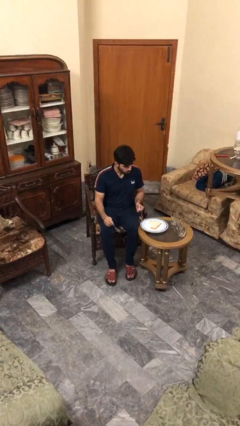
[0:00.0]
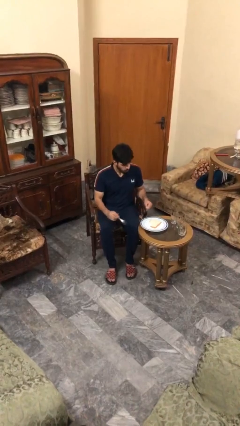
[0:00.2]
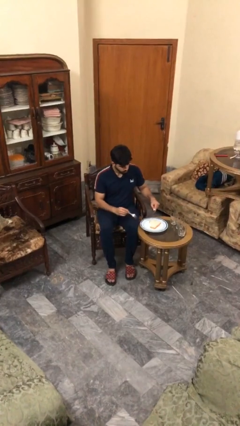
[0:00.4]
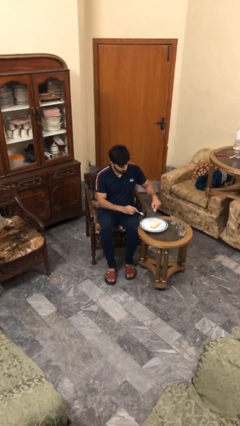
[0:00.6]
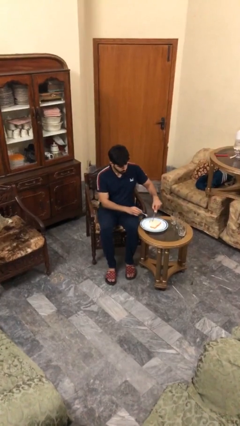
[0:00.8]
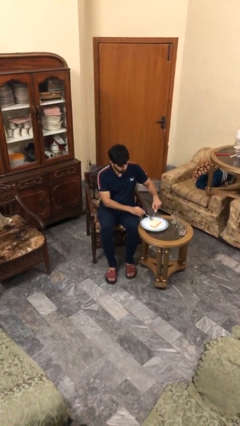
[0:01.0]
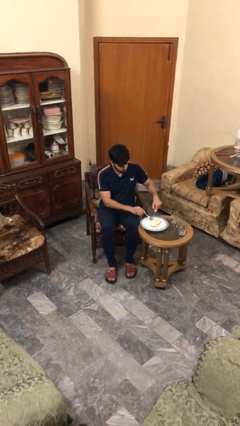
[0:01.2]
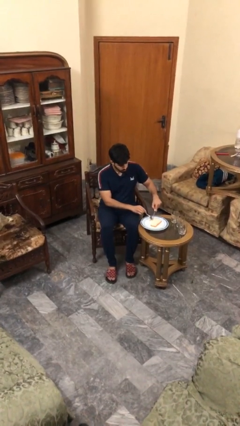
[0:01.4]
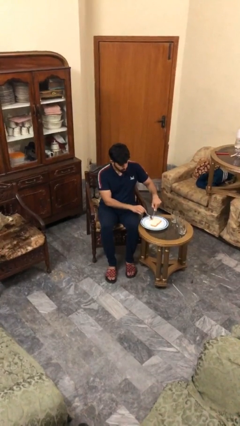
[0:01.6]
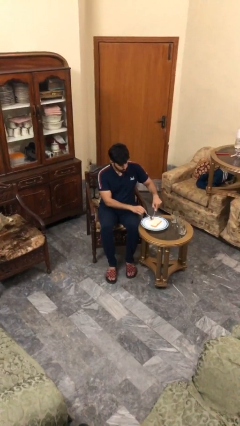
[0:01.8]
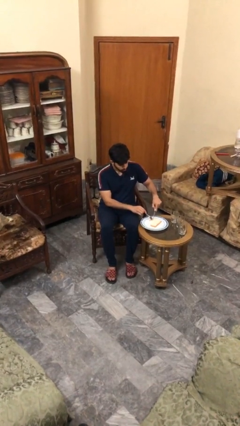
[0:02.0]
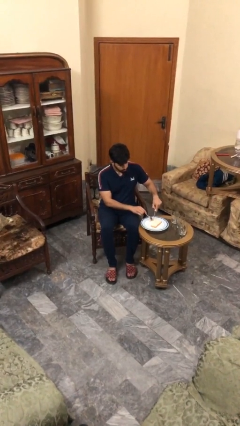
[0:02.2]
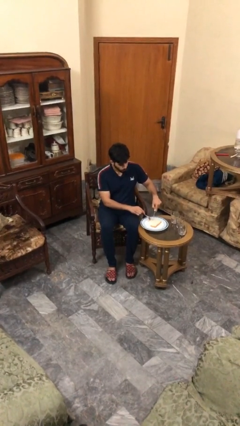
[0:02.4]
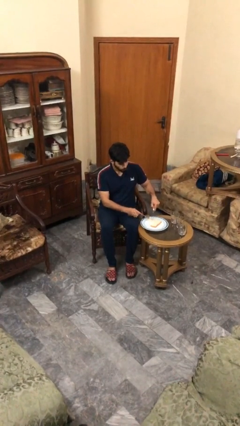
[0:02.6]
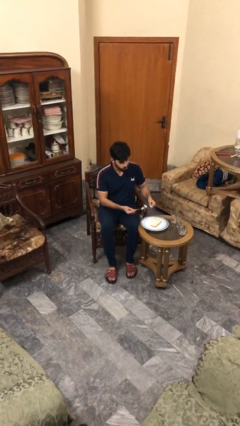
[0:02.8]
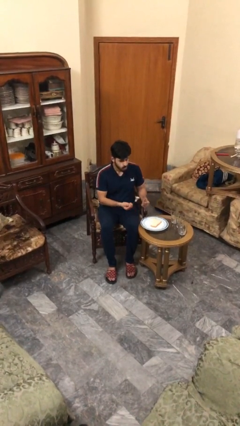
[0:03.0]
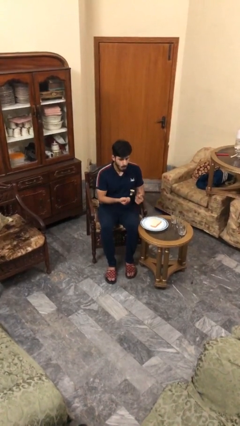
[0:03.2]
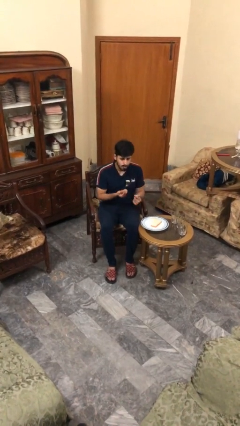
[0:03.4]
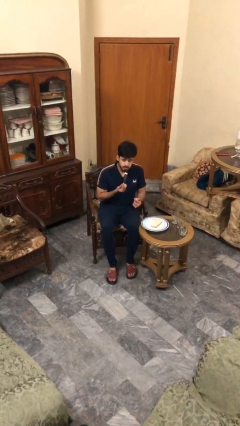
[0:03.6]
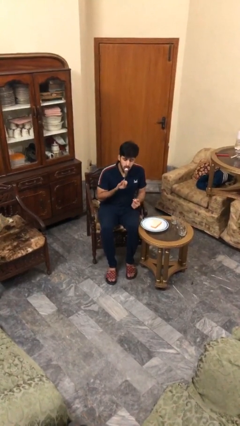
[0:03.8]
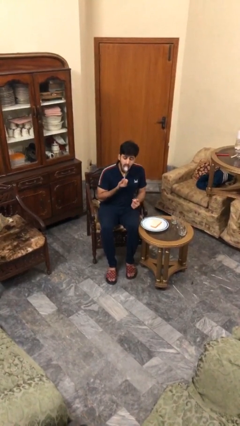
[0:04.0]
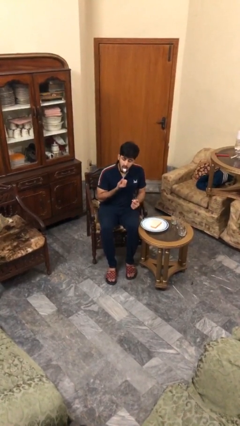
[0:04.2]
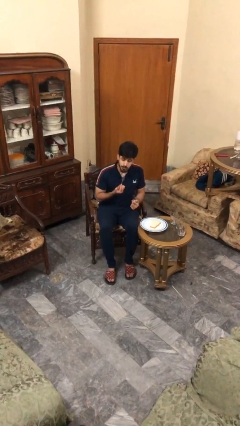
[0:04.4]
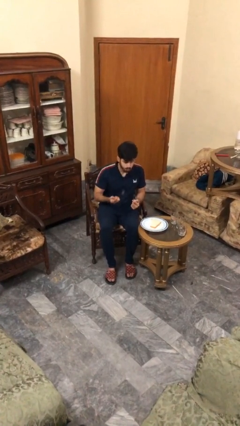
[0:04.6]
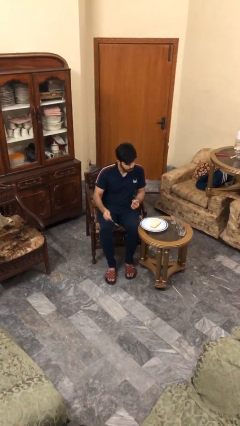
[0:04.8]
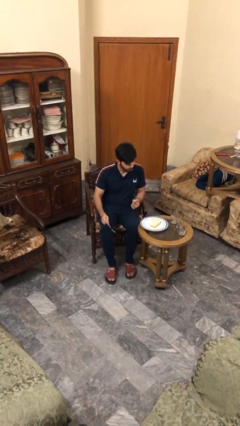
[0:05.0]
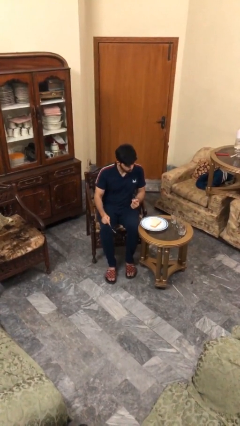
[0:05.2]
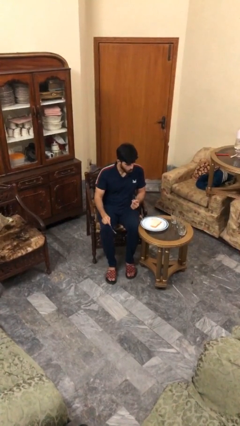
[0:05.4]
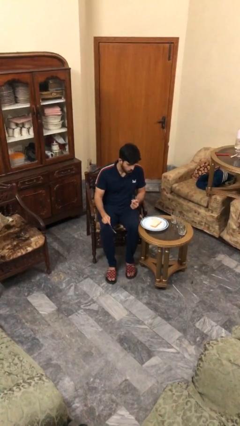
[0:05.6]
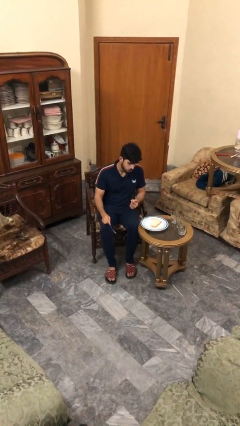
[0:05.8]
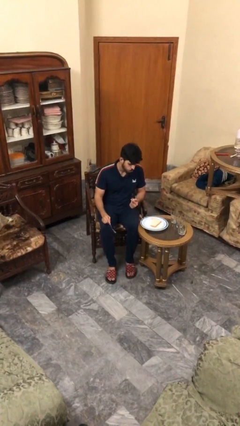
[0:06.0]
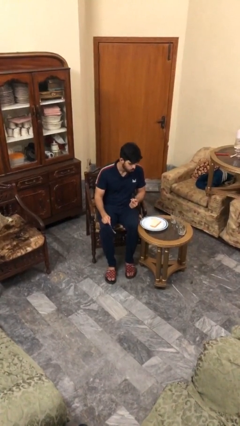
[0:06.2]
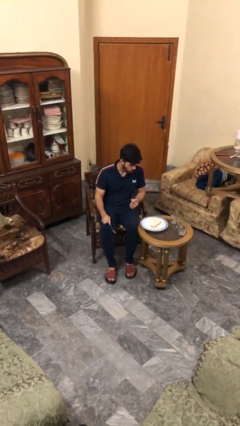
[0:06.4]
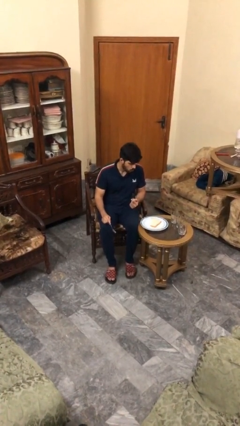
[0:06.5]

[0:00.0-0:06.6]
person eats with utensil

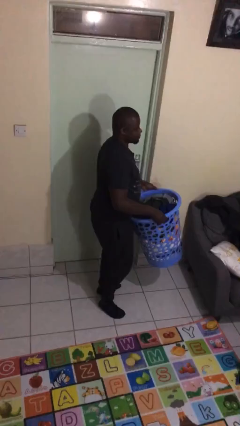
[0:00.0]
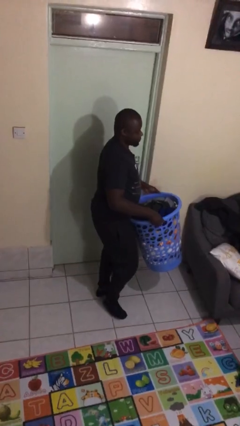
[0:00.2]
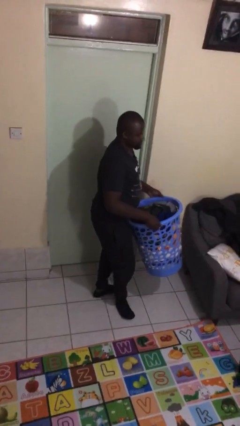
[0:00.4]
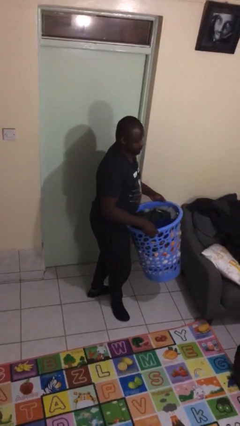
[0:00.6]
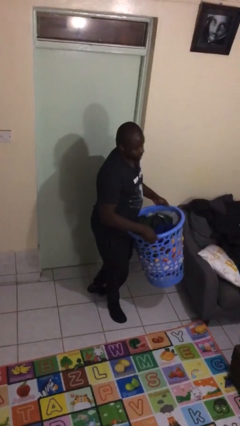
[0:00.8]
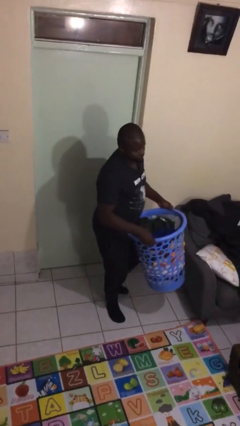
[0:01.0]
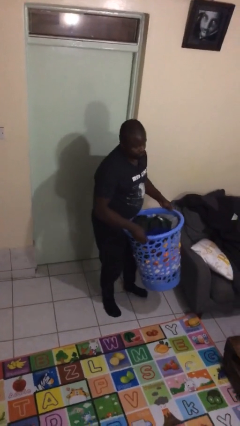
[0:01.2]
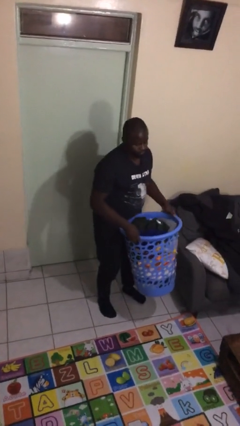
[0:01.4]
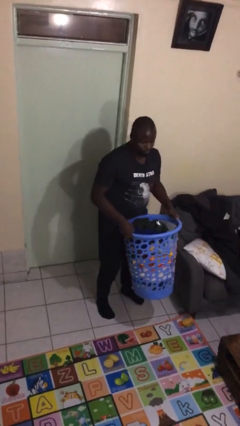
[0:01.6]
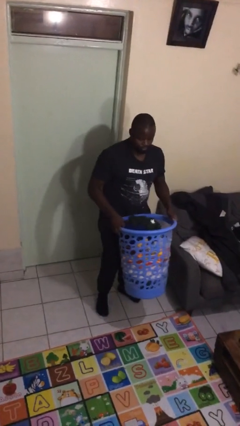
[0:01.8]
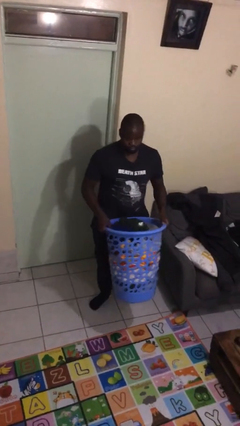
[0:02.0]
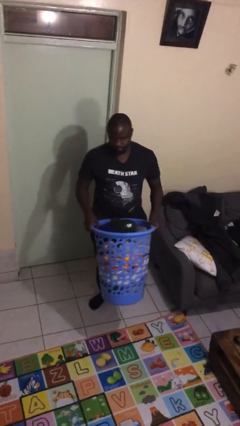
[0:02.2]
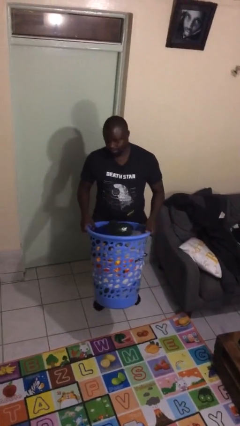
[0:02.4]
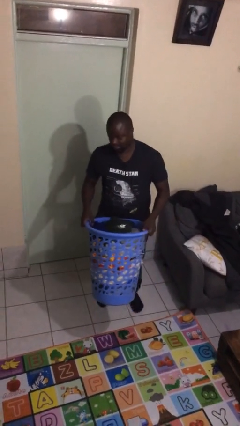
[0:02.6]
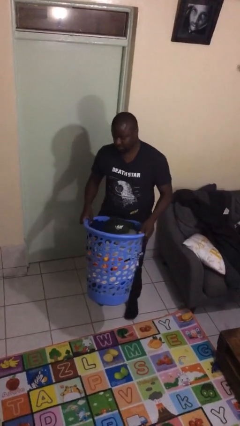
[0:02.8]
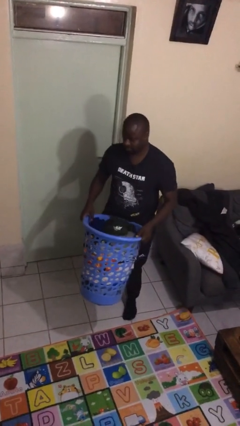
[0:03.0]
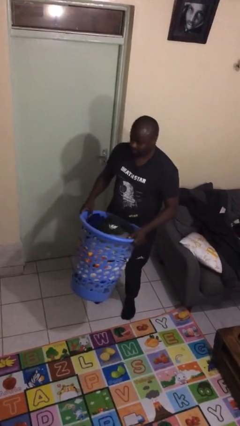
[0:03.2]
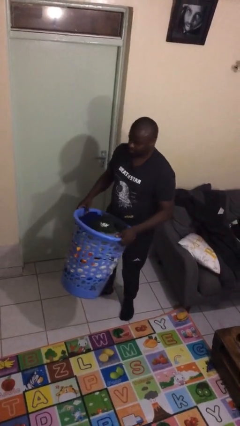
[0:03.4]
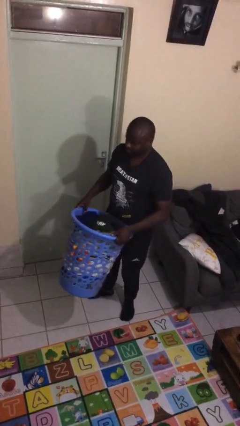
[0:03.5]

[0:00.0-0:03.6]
person carries laundry basket

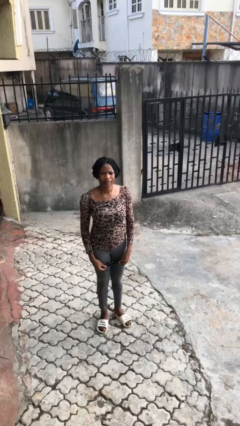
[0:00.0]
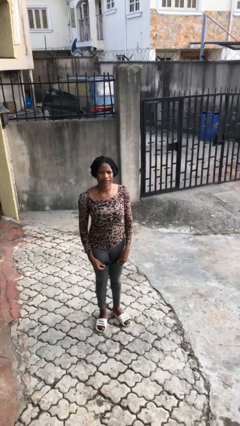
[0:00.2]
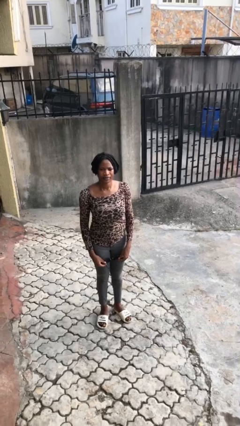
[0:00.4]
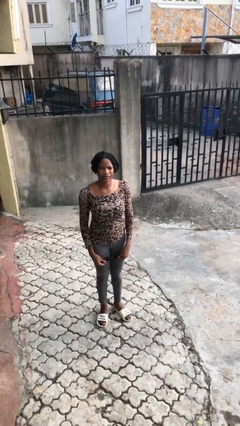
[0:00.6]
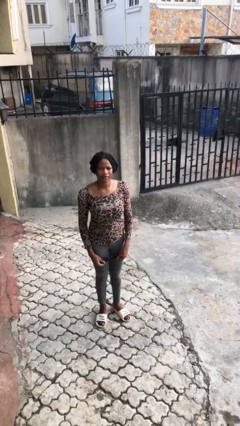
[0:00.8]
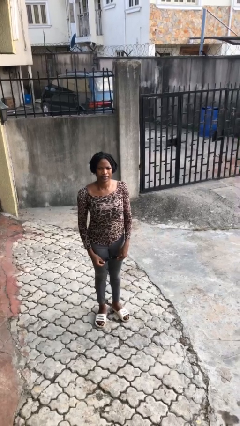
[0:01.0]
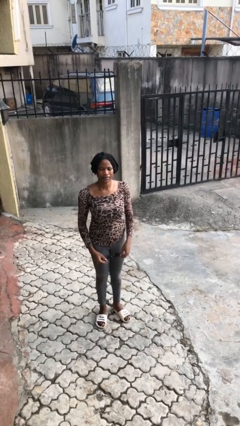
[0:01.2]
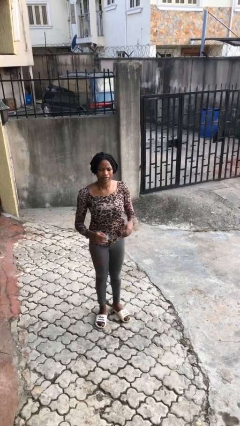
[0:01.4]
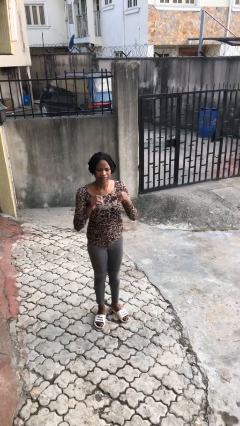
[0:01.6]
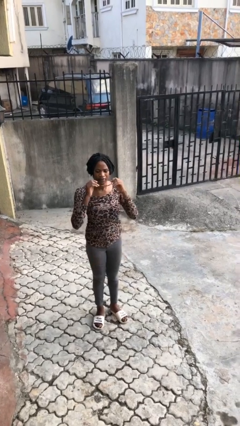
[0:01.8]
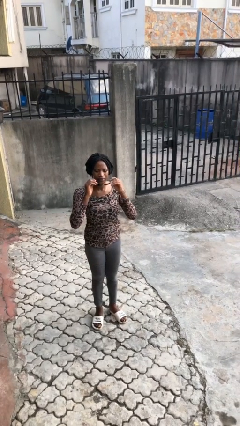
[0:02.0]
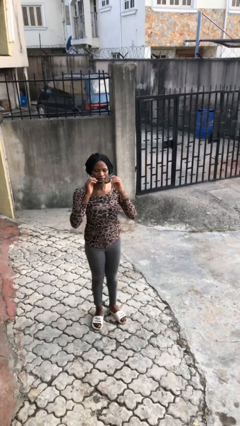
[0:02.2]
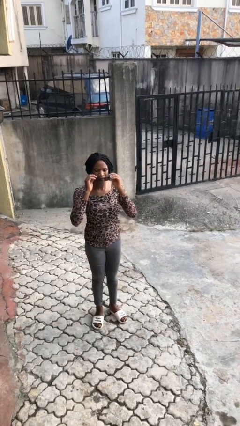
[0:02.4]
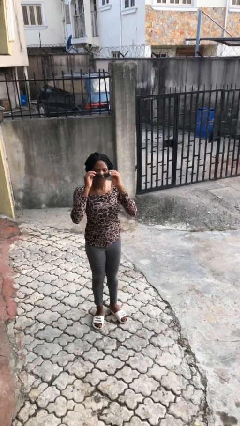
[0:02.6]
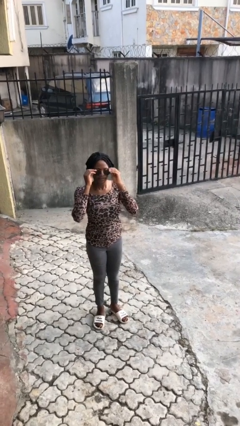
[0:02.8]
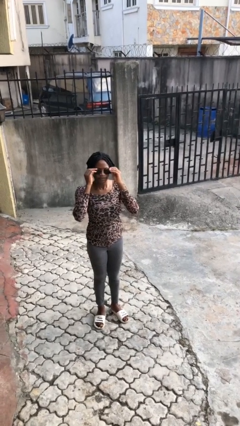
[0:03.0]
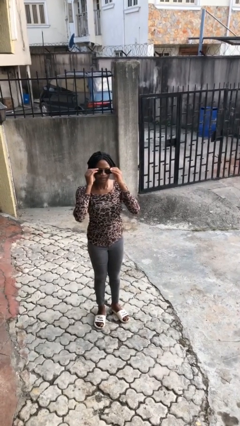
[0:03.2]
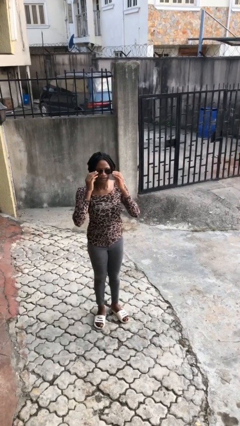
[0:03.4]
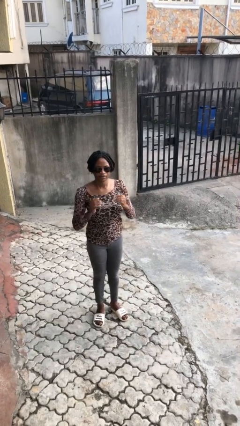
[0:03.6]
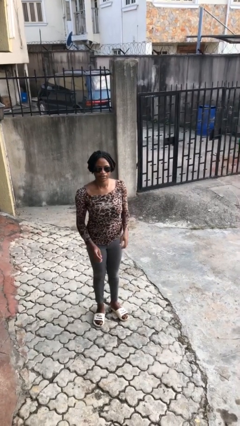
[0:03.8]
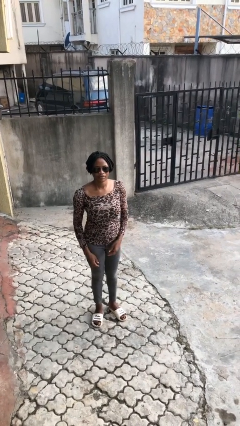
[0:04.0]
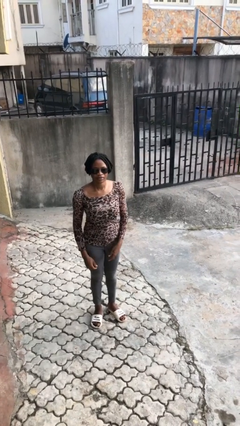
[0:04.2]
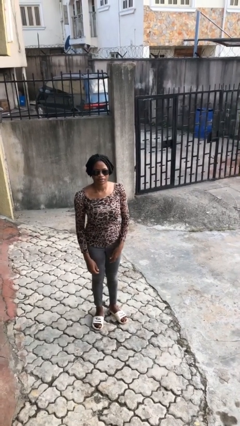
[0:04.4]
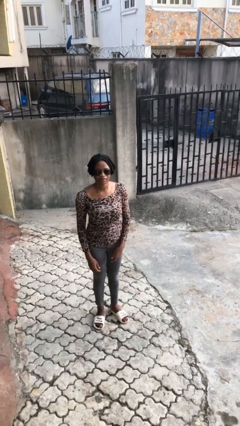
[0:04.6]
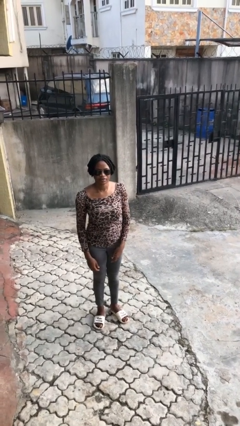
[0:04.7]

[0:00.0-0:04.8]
person puts on sunglasses

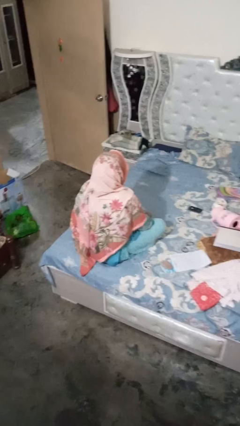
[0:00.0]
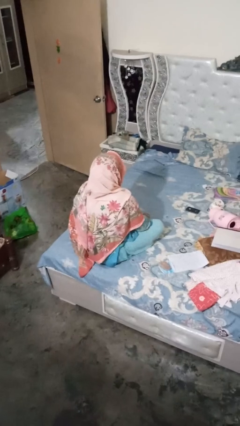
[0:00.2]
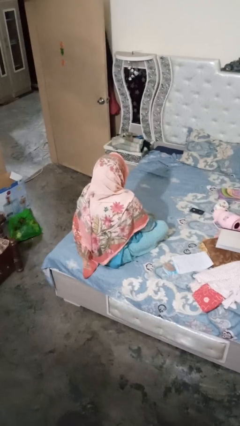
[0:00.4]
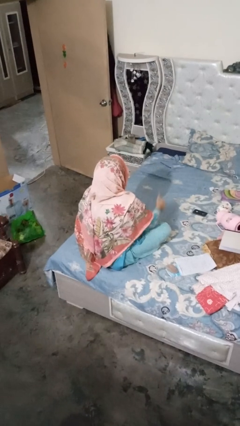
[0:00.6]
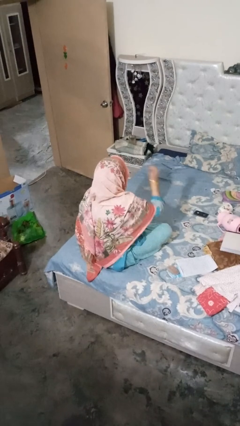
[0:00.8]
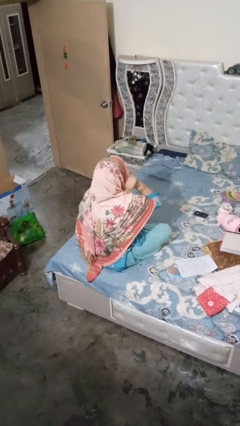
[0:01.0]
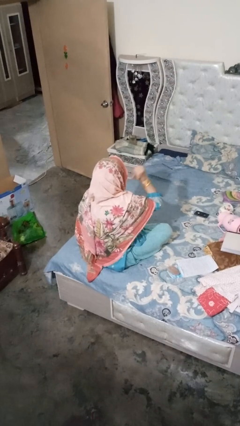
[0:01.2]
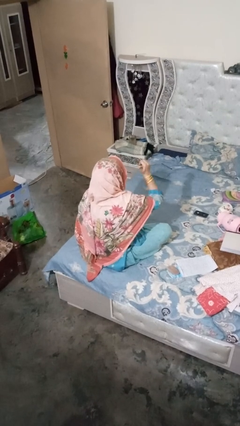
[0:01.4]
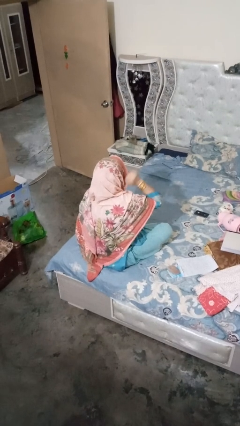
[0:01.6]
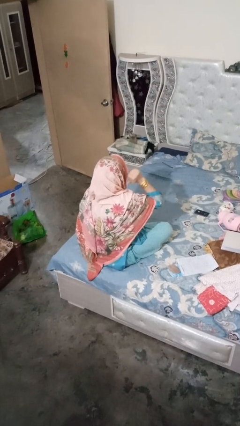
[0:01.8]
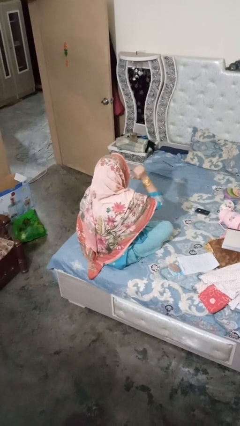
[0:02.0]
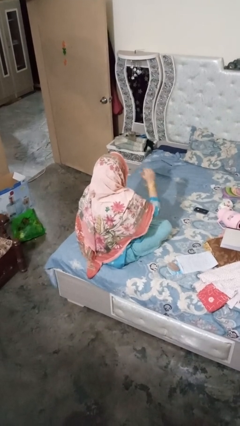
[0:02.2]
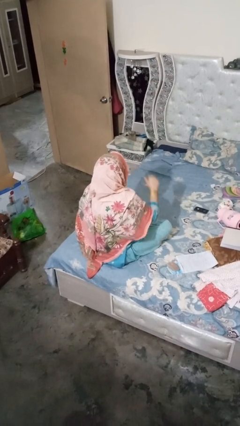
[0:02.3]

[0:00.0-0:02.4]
person gestures behind me

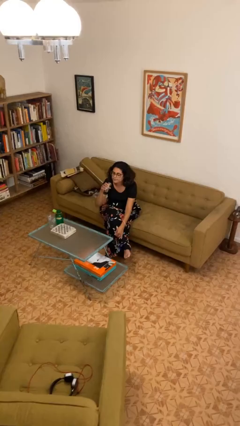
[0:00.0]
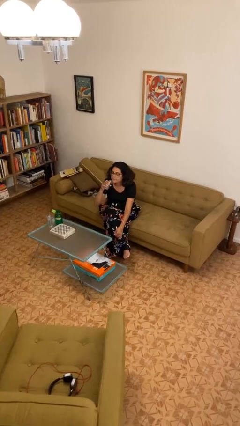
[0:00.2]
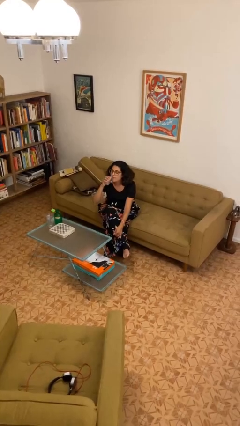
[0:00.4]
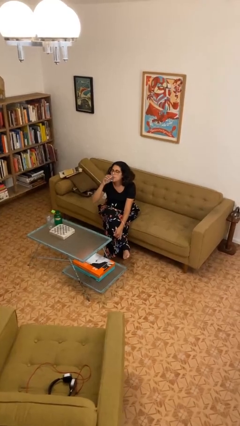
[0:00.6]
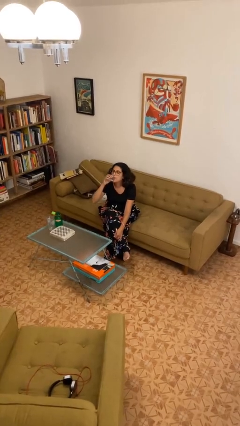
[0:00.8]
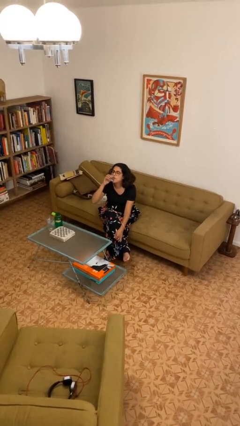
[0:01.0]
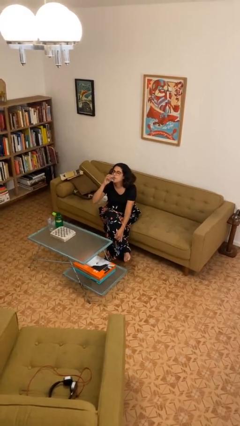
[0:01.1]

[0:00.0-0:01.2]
person drinks from shotglass
